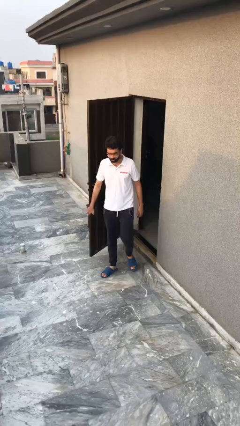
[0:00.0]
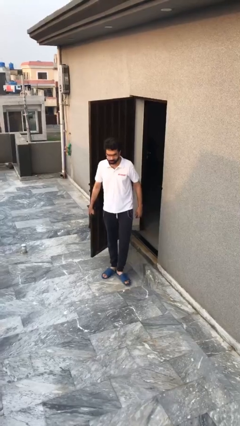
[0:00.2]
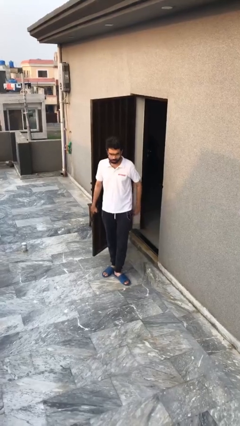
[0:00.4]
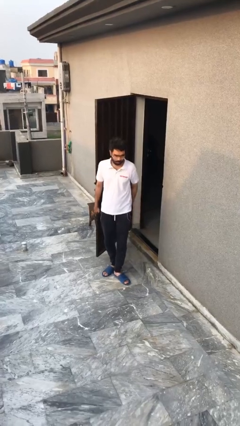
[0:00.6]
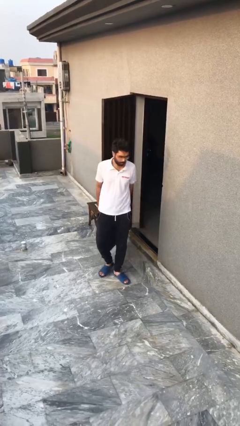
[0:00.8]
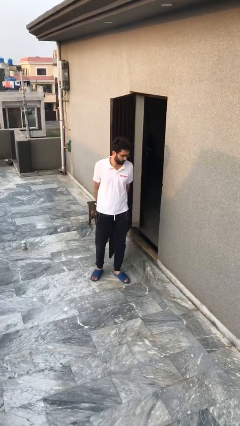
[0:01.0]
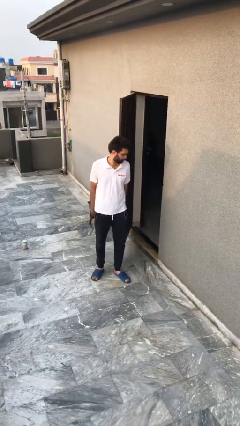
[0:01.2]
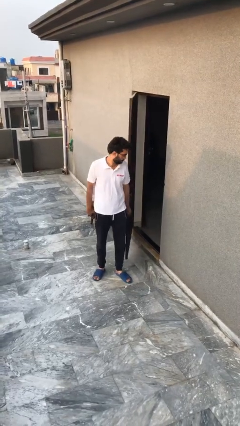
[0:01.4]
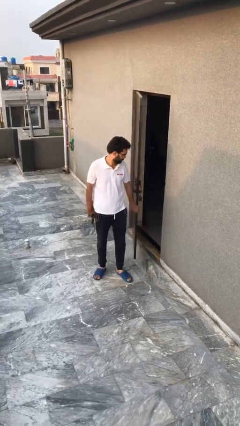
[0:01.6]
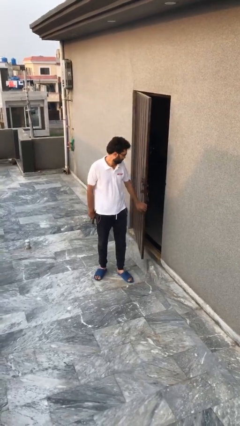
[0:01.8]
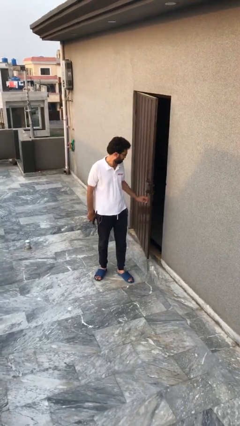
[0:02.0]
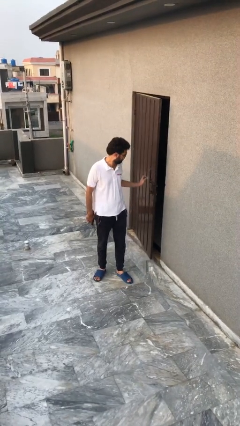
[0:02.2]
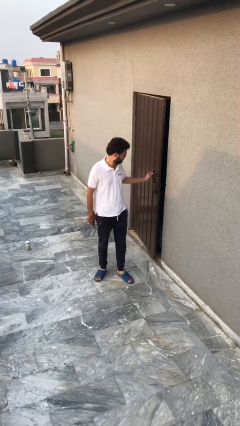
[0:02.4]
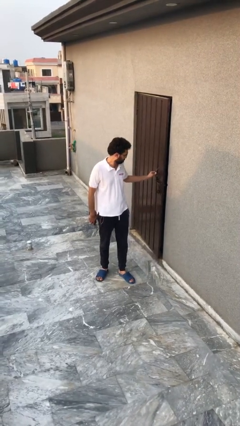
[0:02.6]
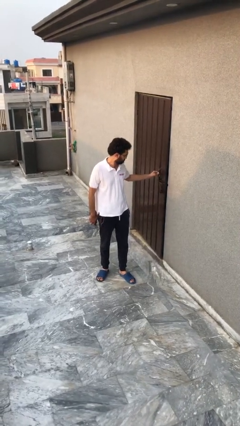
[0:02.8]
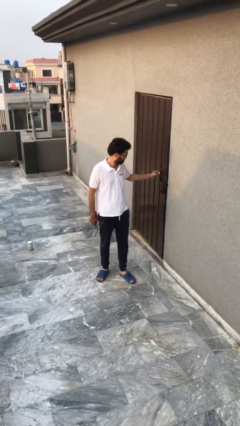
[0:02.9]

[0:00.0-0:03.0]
person closes facility door

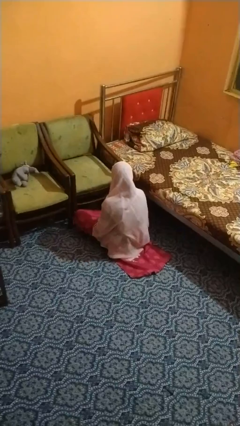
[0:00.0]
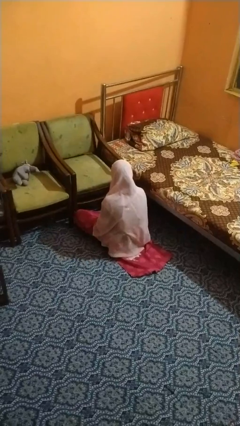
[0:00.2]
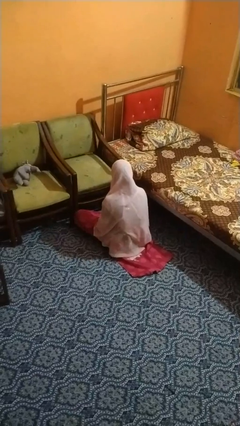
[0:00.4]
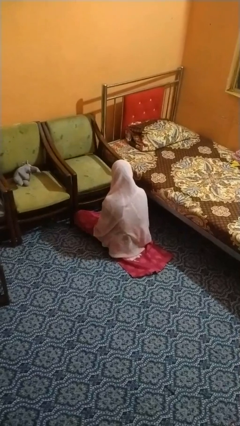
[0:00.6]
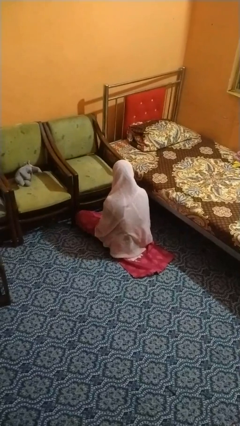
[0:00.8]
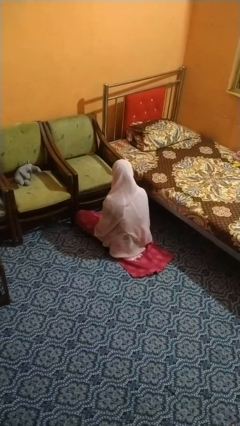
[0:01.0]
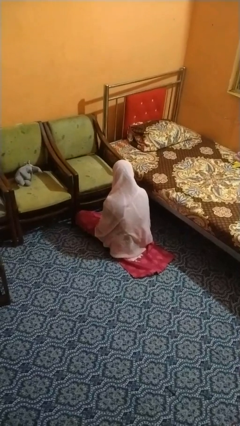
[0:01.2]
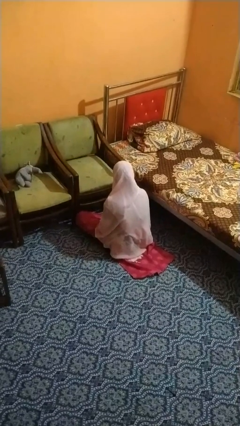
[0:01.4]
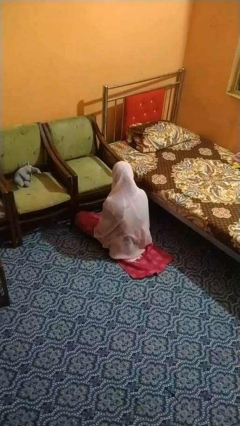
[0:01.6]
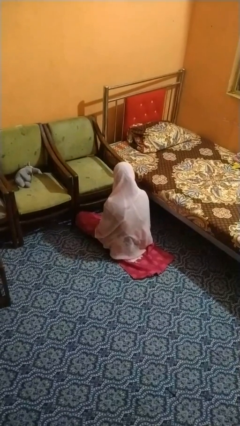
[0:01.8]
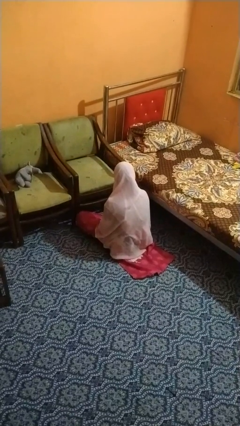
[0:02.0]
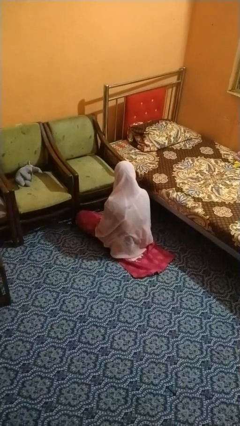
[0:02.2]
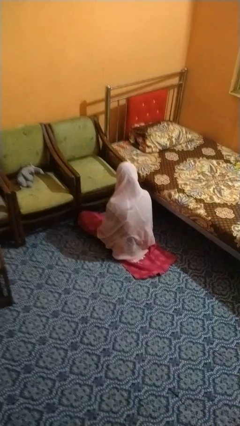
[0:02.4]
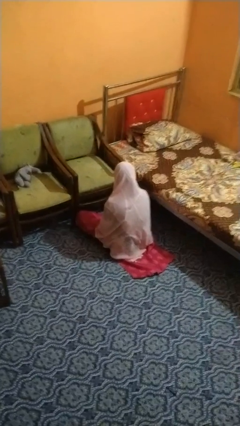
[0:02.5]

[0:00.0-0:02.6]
person crosses legs

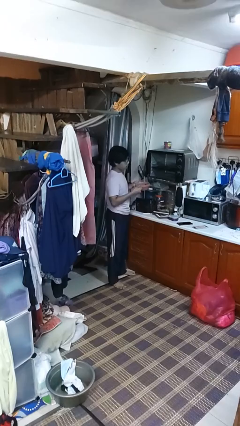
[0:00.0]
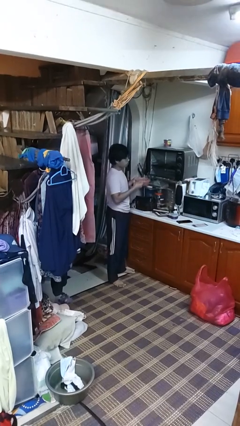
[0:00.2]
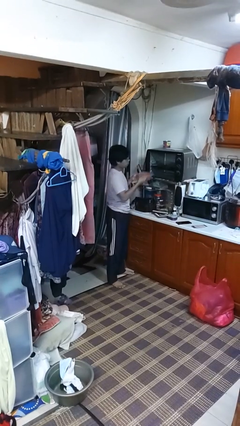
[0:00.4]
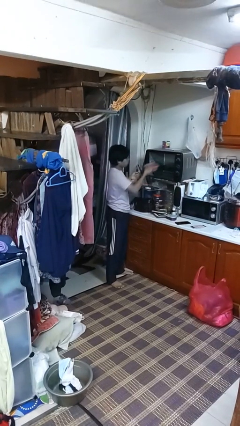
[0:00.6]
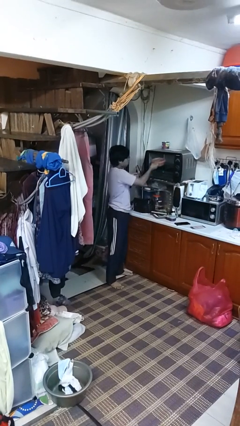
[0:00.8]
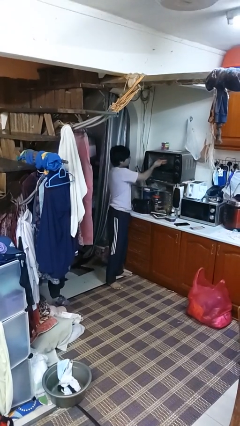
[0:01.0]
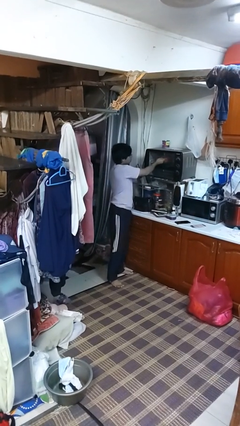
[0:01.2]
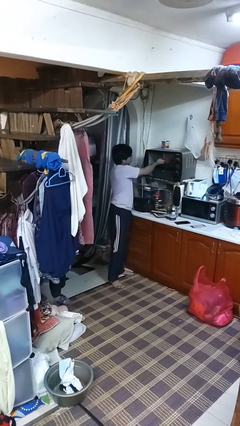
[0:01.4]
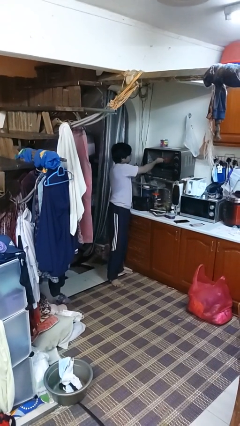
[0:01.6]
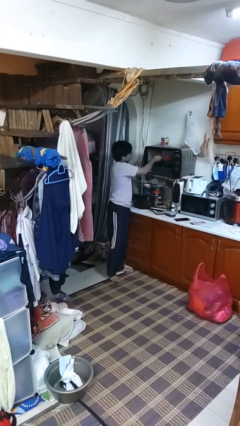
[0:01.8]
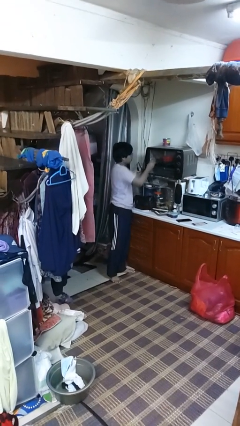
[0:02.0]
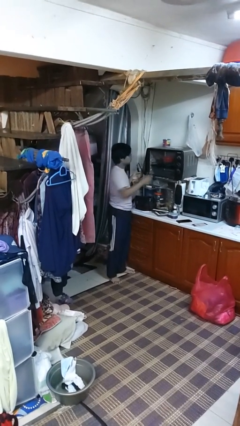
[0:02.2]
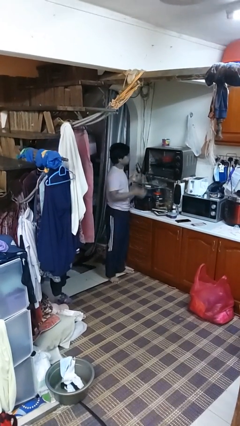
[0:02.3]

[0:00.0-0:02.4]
person puts object into oven

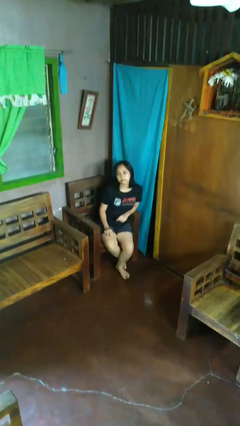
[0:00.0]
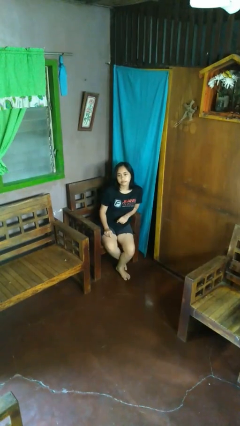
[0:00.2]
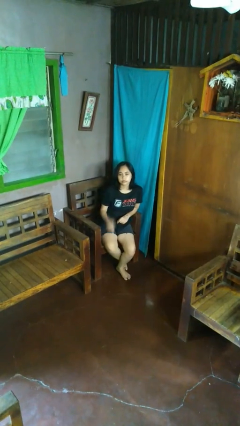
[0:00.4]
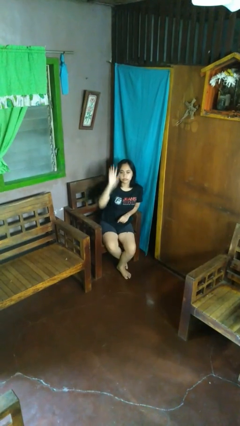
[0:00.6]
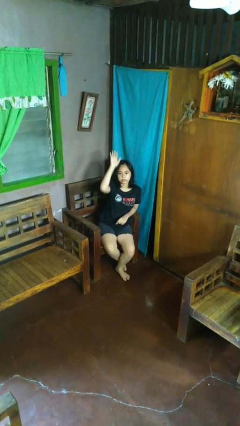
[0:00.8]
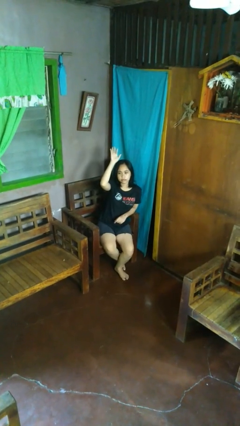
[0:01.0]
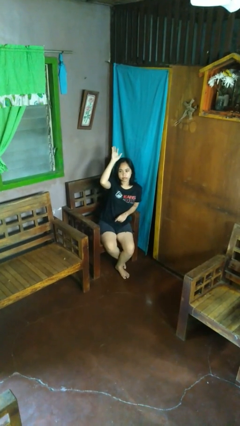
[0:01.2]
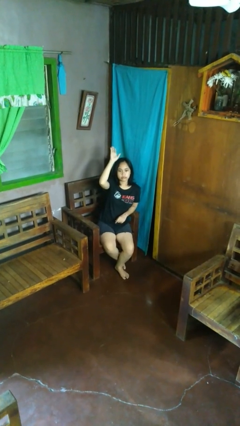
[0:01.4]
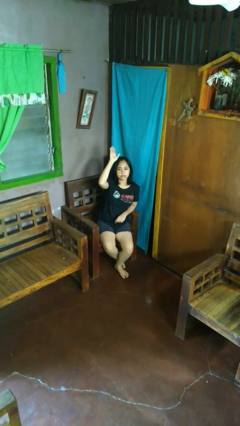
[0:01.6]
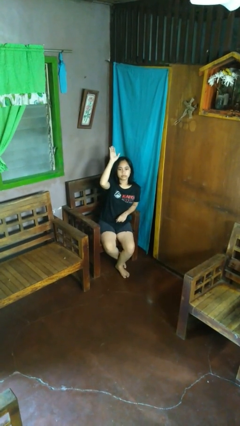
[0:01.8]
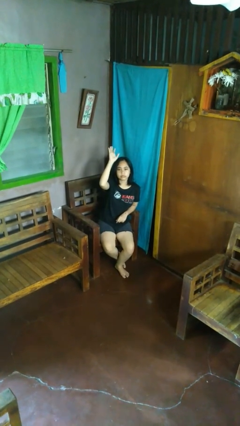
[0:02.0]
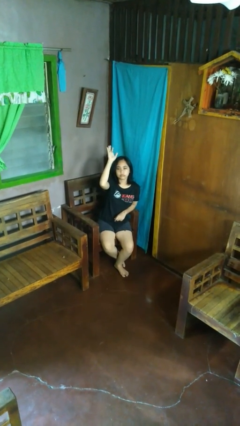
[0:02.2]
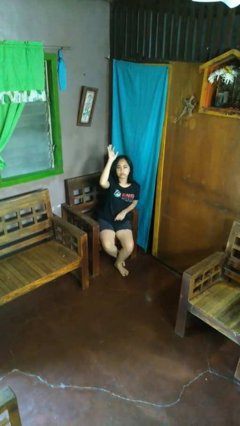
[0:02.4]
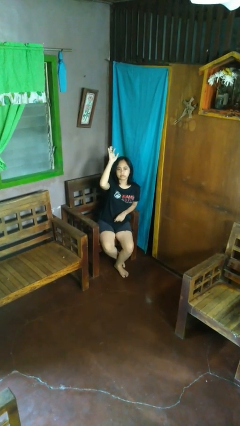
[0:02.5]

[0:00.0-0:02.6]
person gestures raise hand

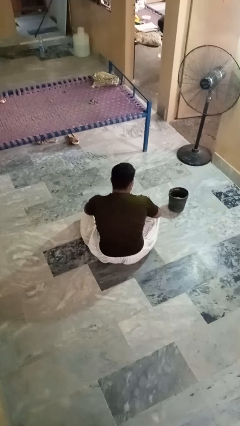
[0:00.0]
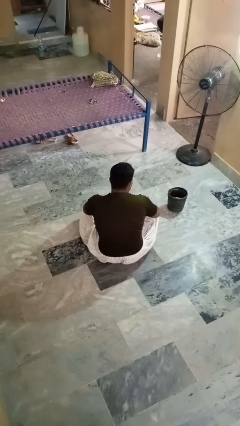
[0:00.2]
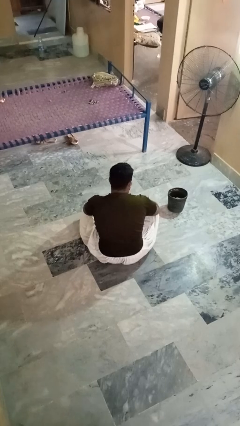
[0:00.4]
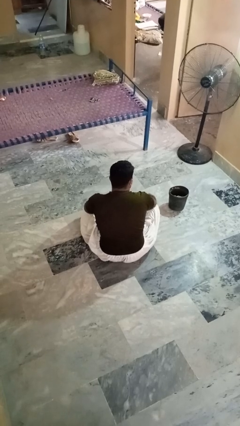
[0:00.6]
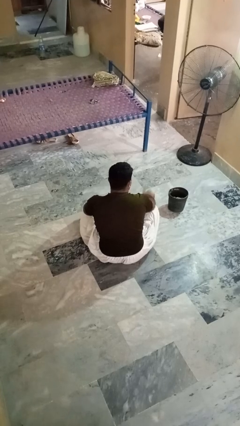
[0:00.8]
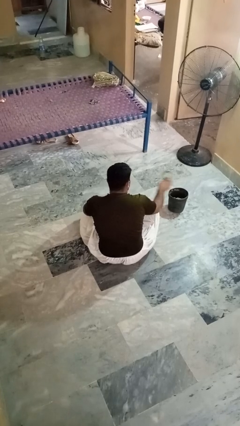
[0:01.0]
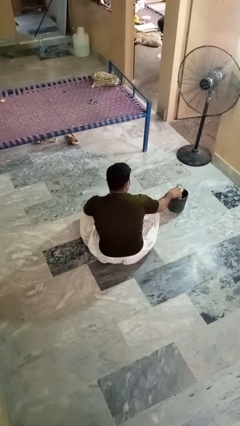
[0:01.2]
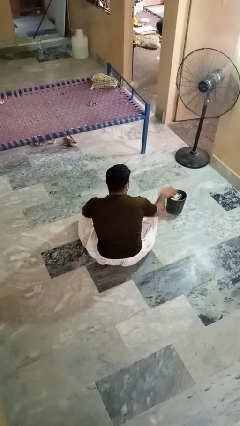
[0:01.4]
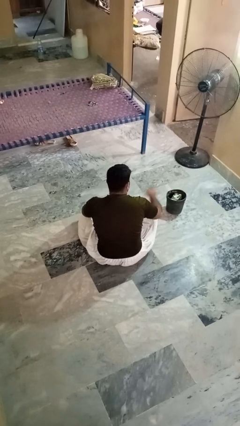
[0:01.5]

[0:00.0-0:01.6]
person puts object into basket

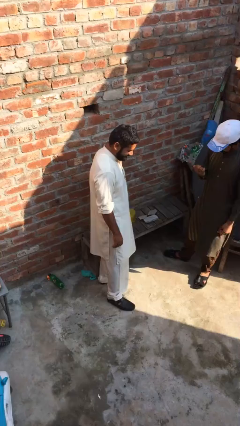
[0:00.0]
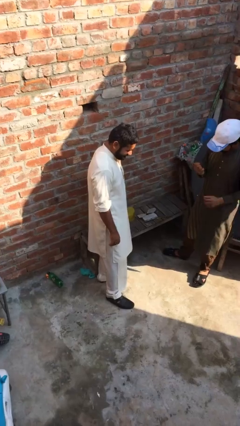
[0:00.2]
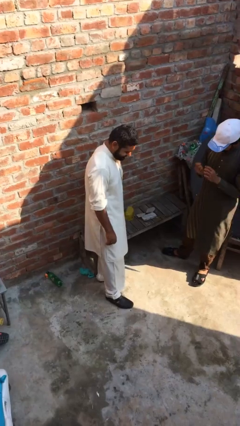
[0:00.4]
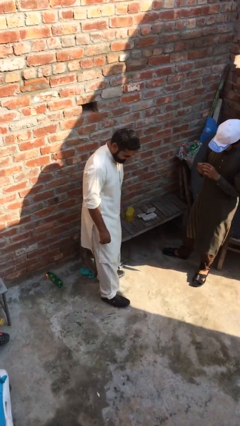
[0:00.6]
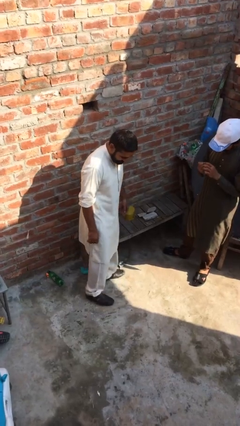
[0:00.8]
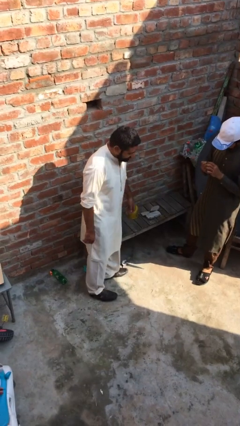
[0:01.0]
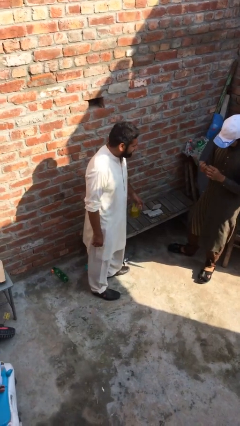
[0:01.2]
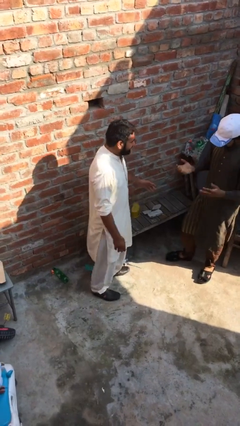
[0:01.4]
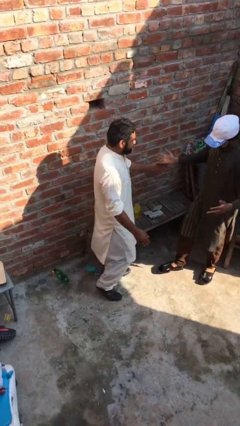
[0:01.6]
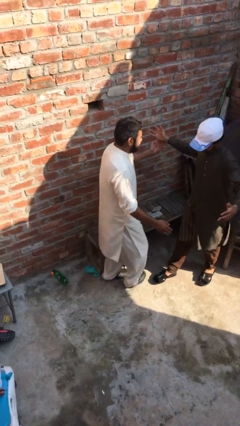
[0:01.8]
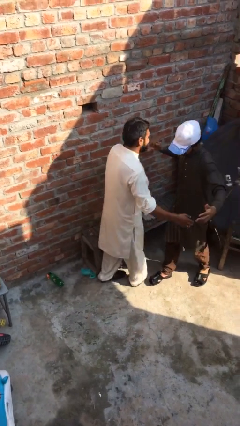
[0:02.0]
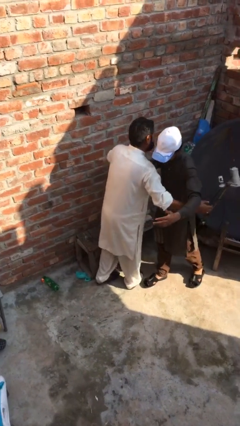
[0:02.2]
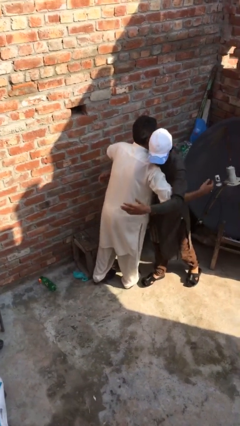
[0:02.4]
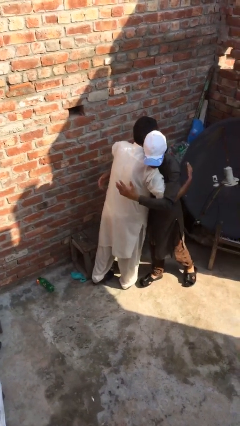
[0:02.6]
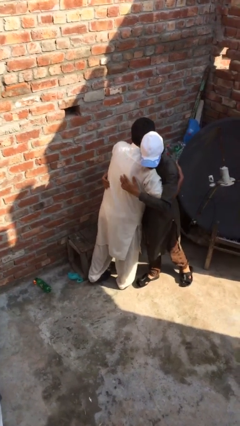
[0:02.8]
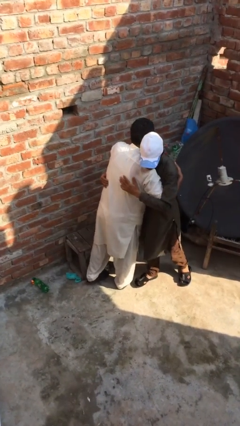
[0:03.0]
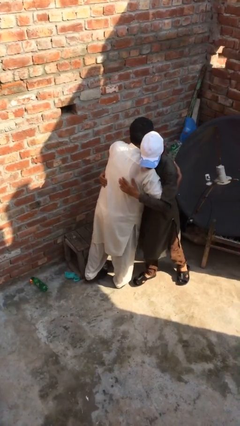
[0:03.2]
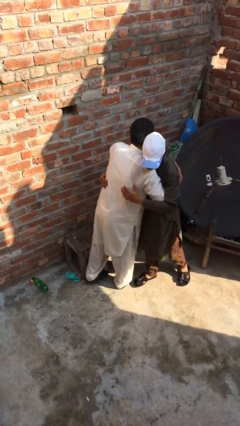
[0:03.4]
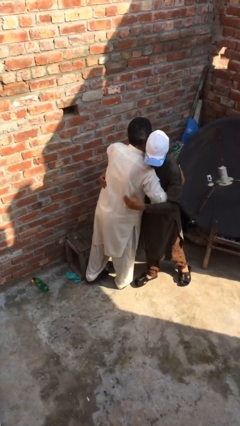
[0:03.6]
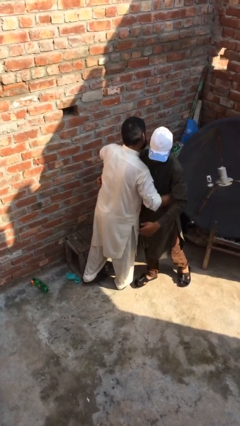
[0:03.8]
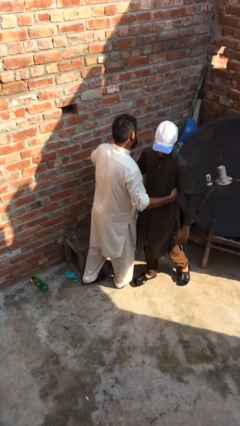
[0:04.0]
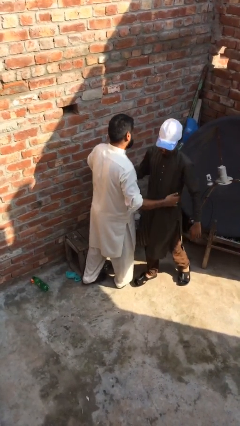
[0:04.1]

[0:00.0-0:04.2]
person embraces person

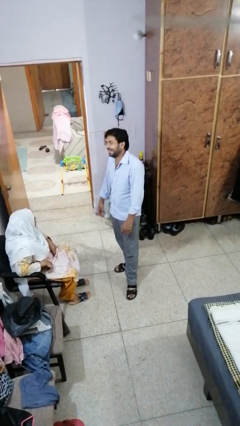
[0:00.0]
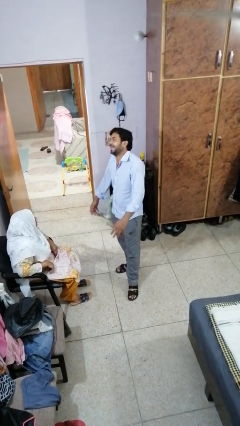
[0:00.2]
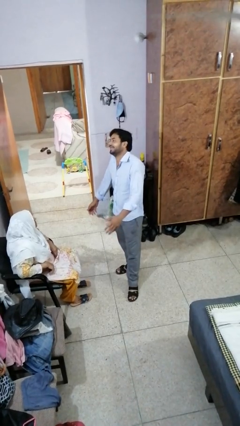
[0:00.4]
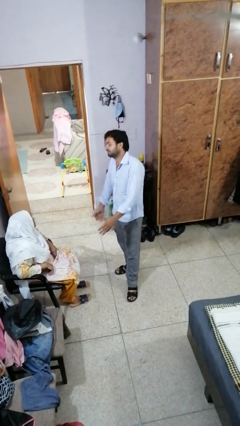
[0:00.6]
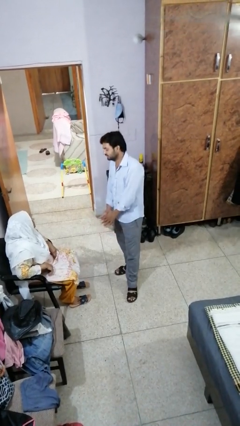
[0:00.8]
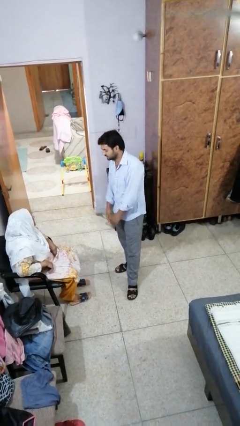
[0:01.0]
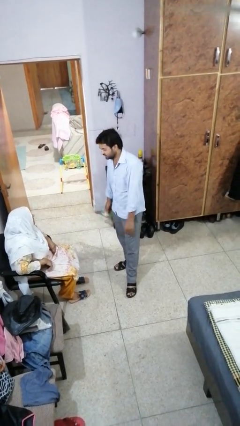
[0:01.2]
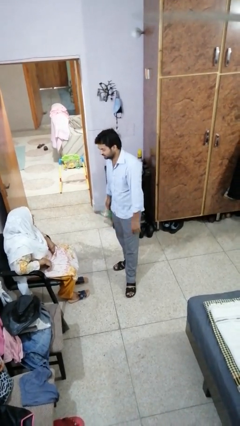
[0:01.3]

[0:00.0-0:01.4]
person laughs with person
